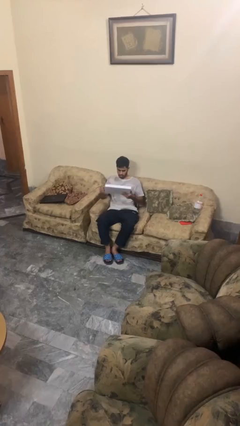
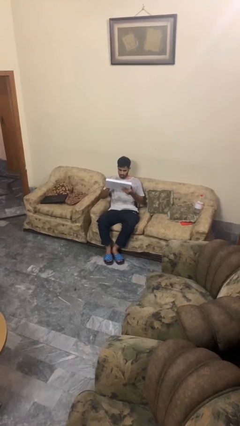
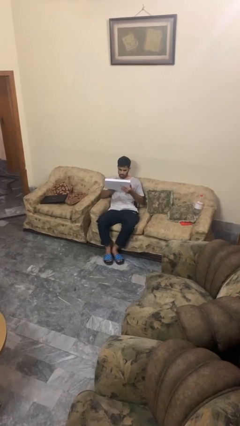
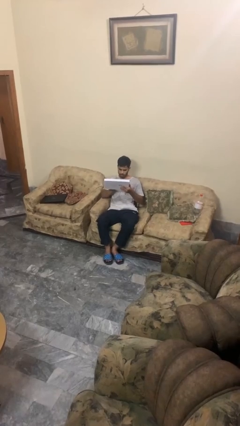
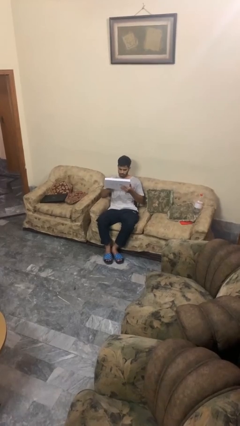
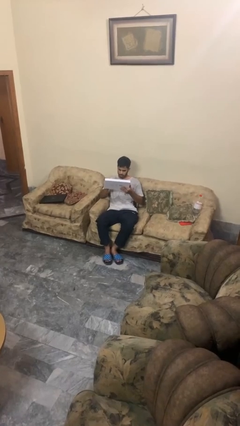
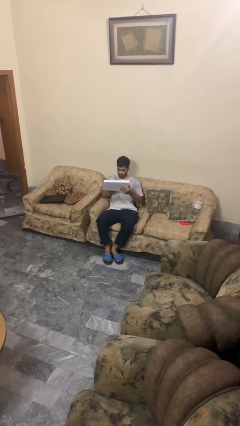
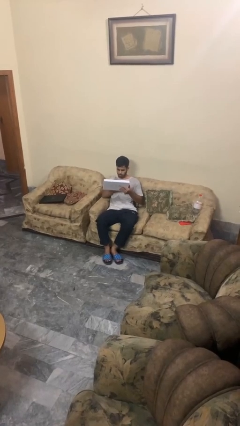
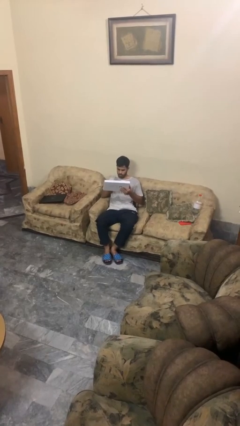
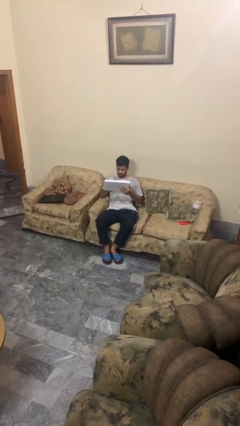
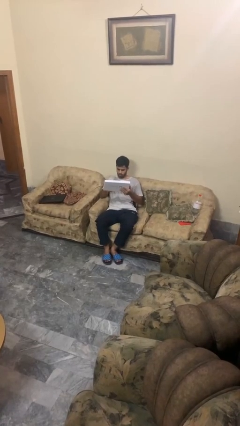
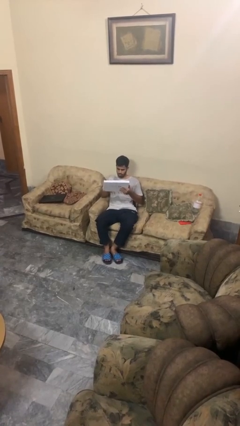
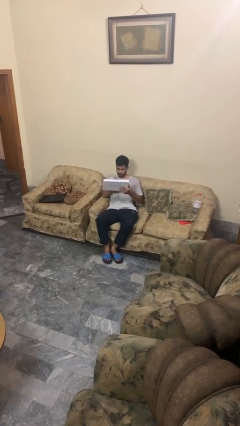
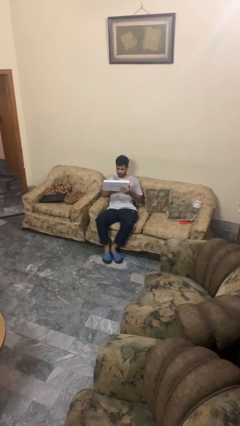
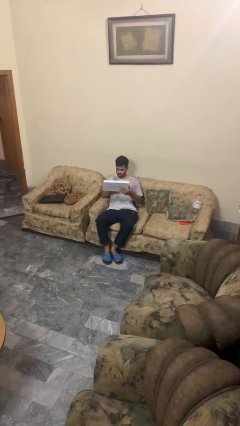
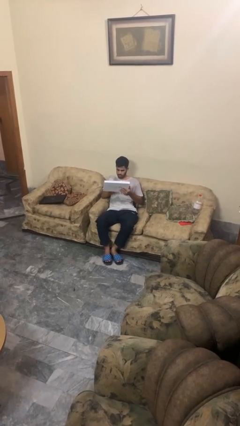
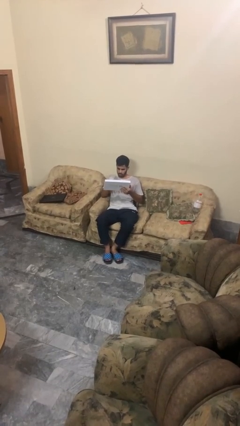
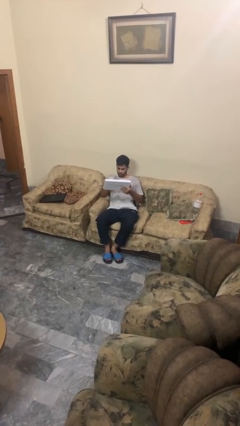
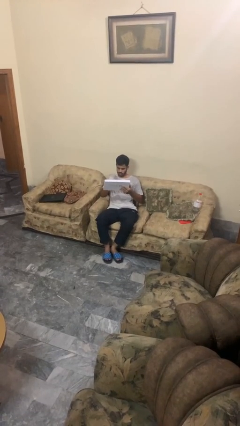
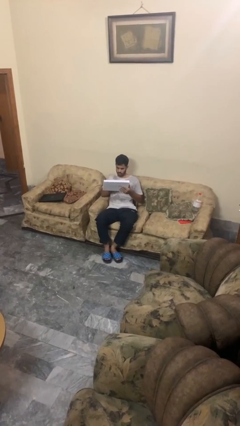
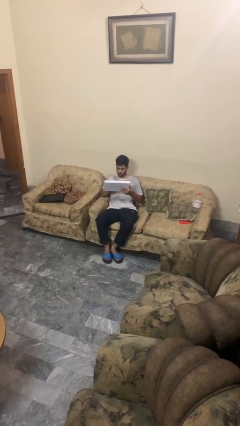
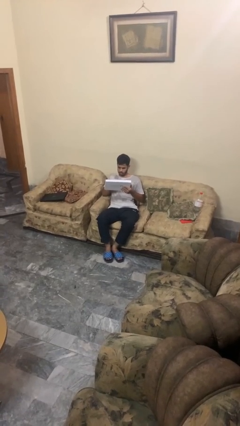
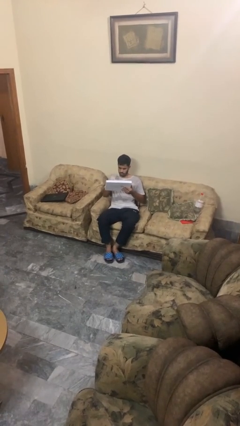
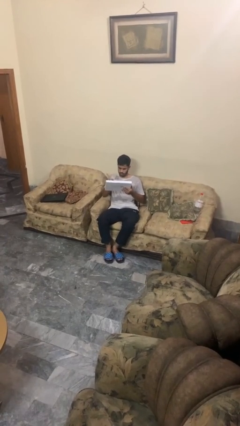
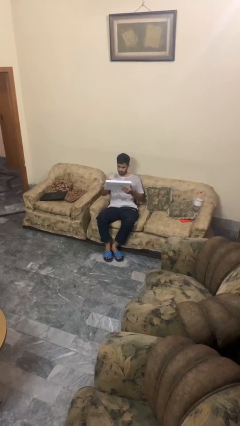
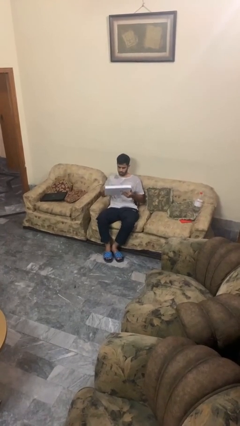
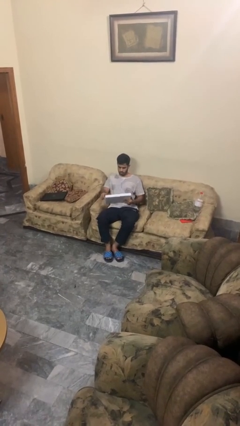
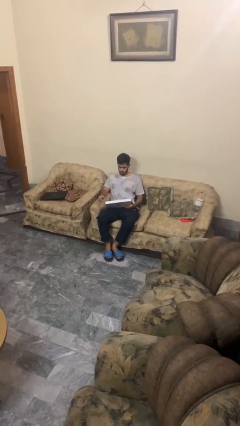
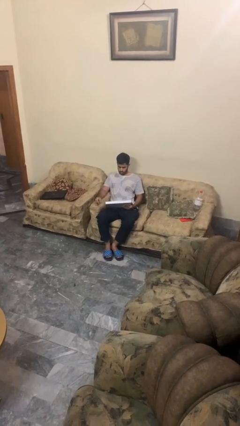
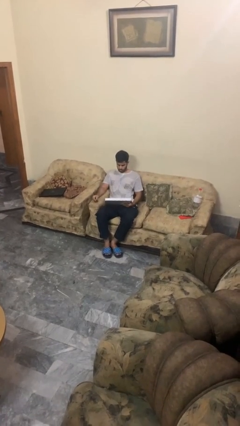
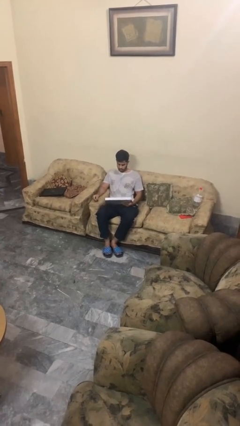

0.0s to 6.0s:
person interacts with tablet

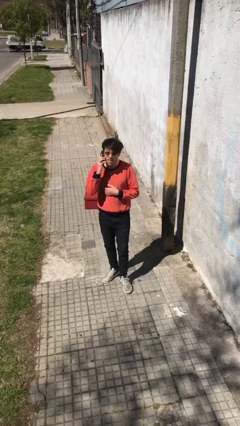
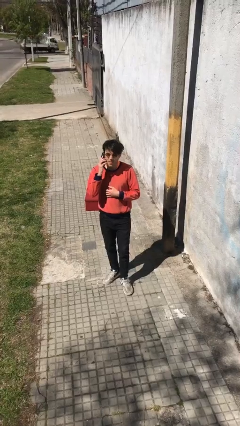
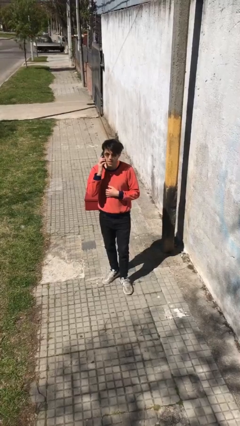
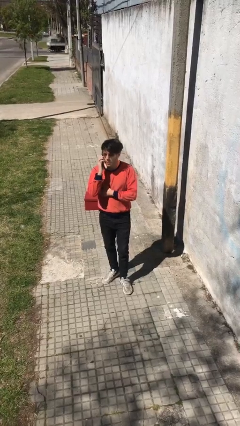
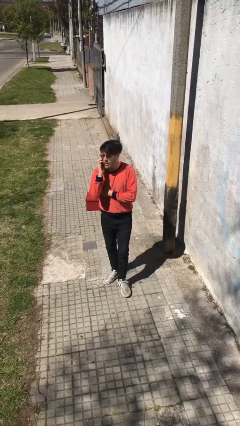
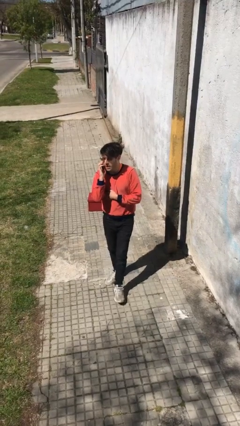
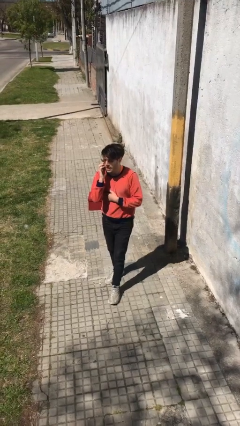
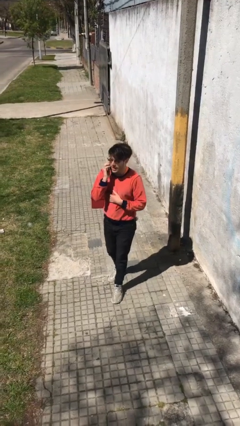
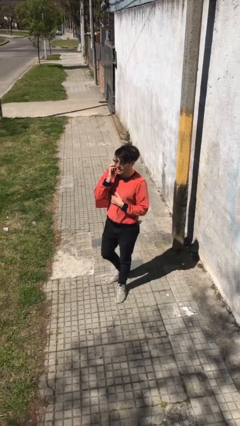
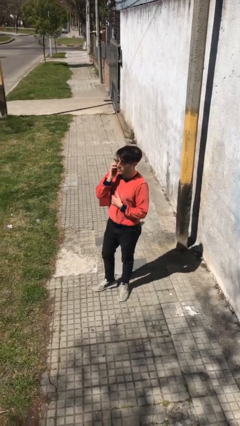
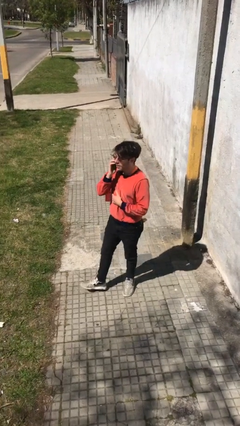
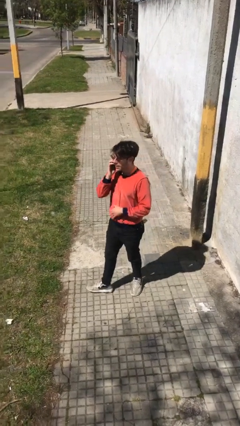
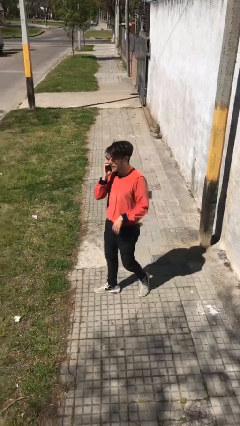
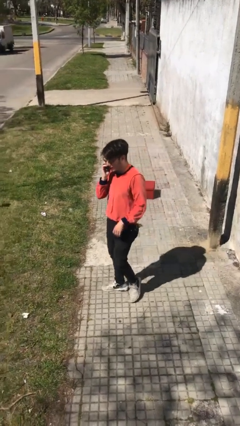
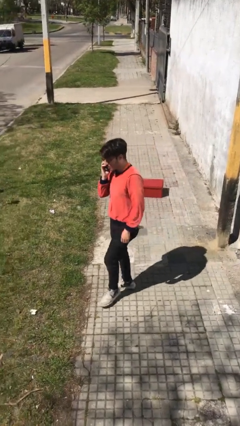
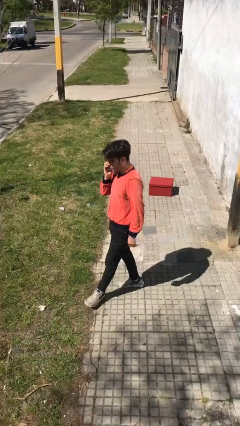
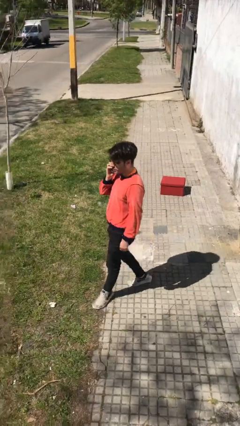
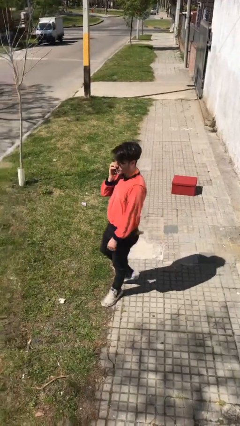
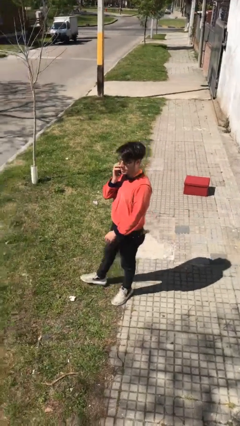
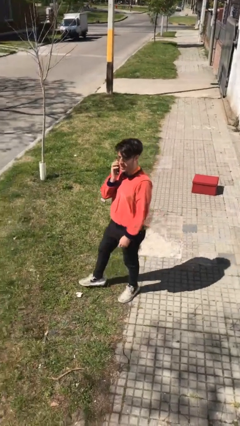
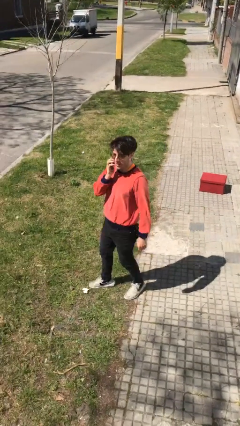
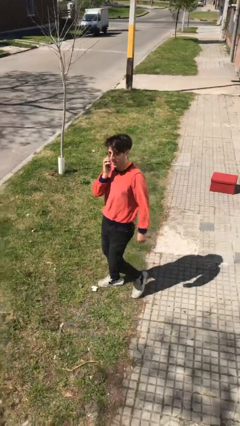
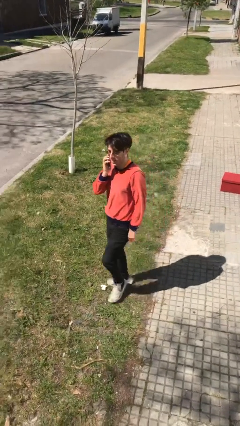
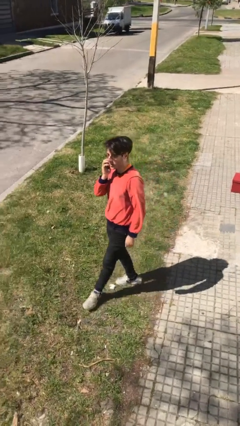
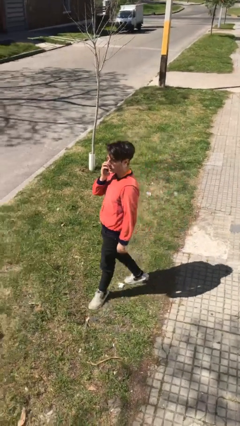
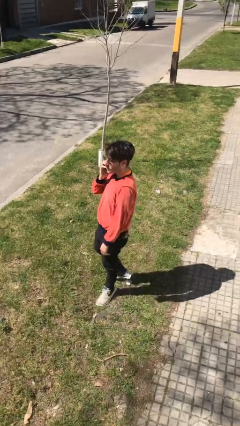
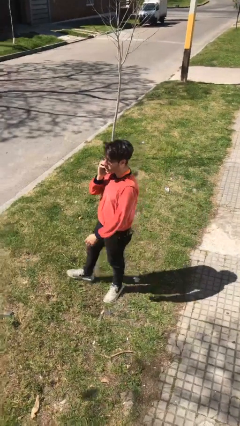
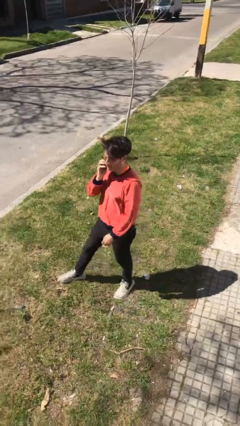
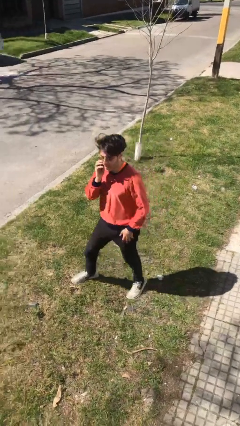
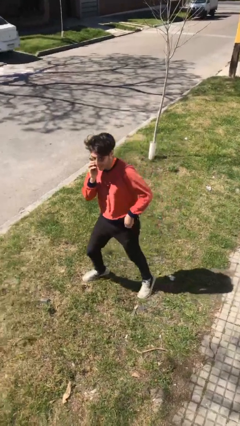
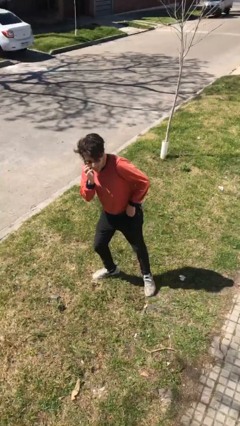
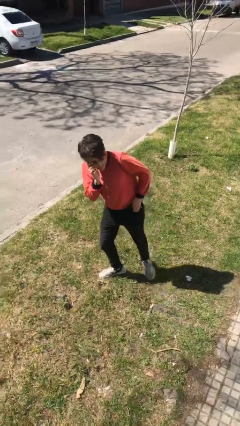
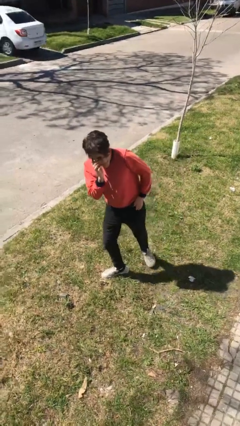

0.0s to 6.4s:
person talks on phone

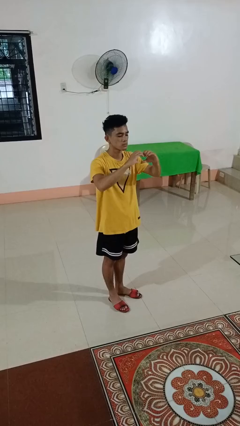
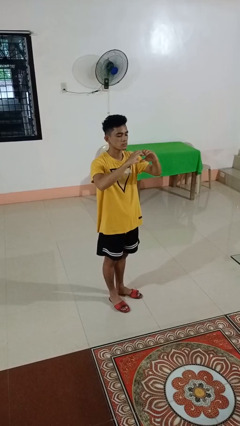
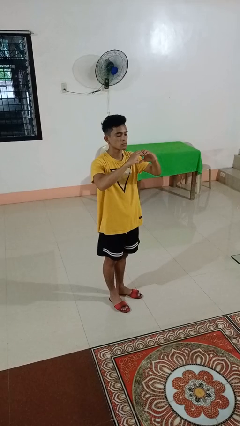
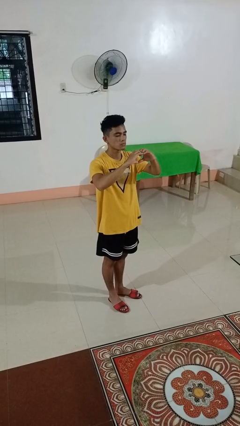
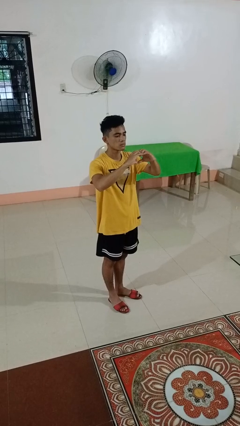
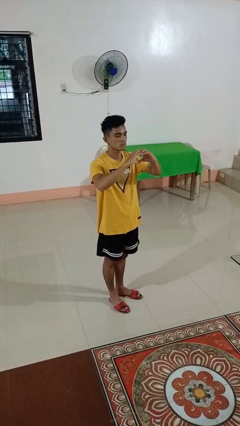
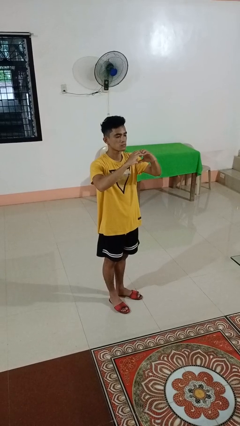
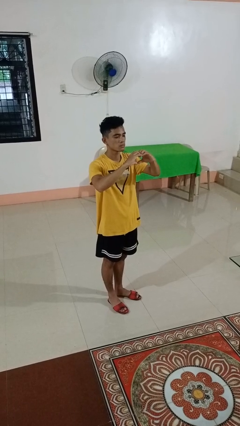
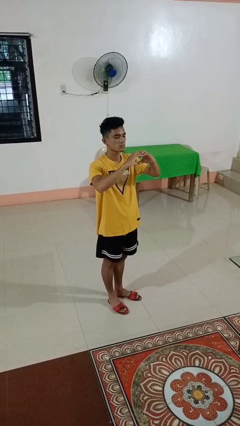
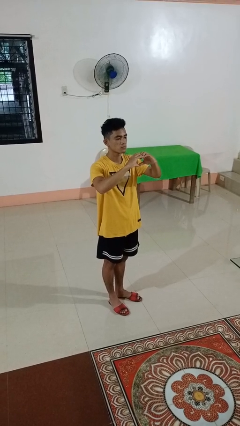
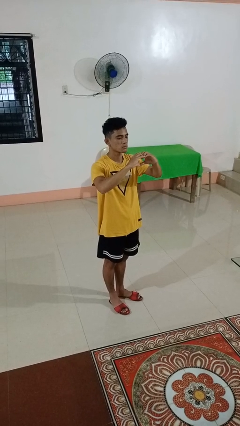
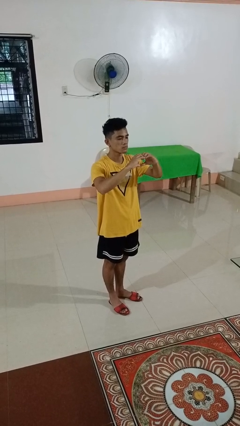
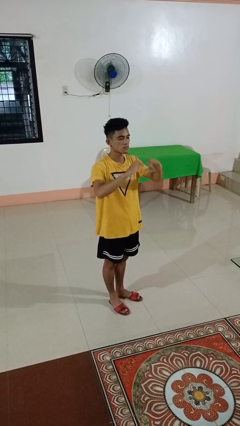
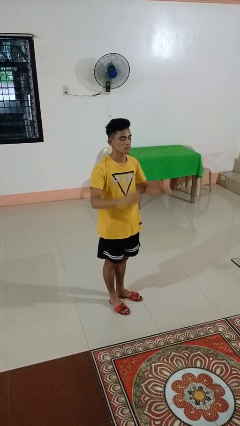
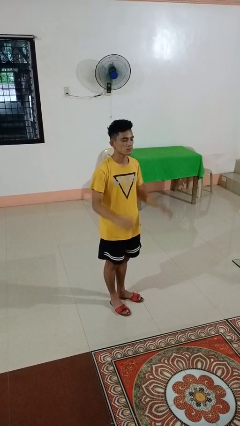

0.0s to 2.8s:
person gestures heart

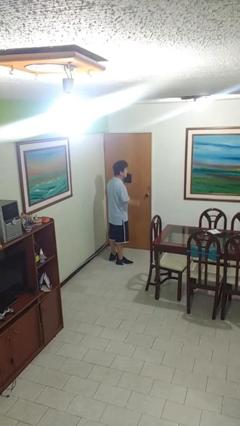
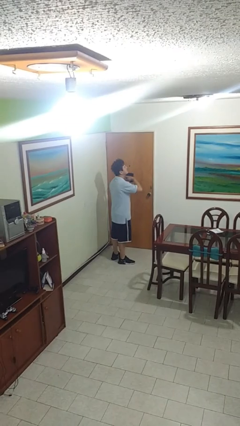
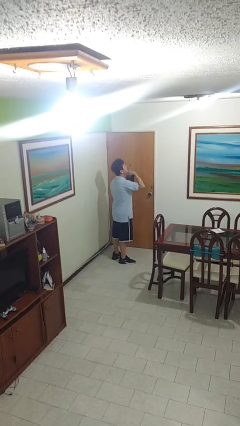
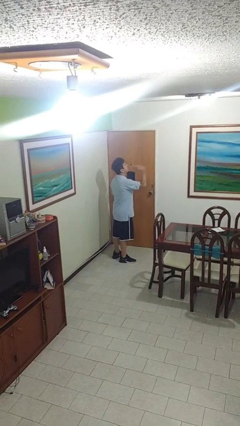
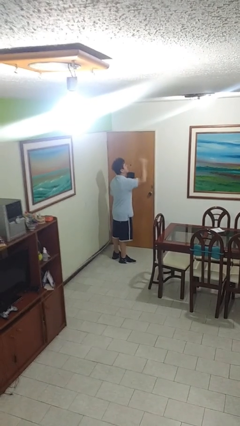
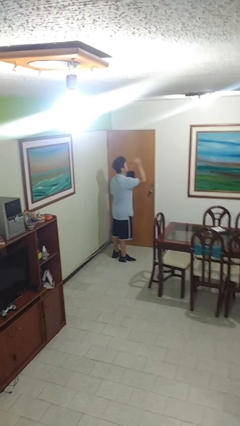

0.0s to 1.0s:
person gestures cut

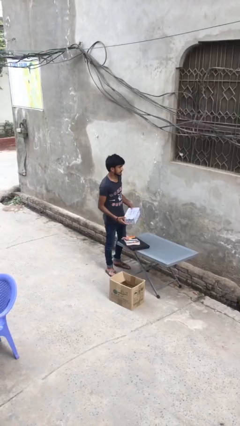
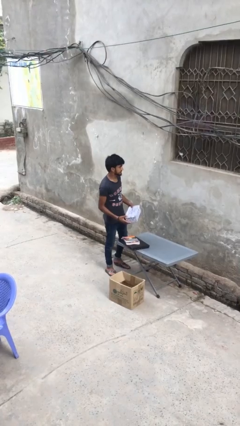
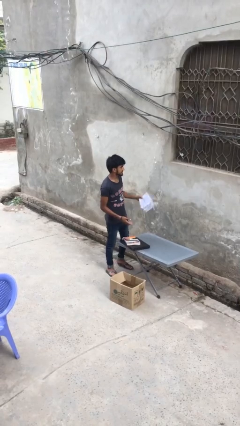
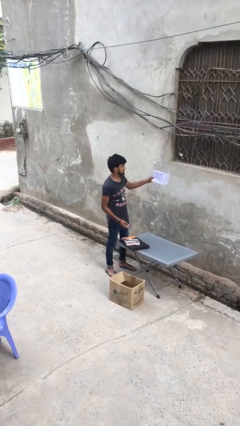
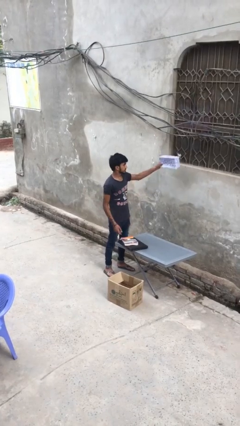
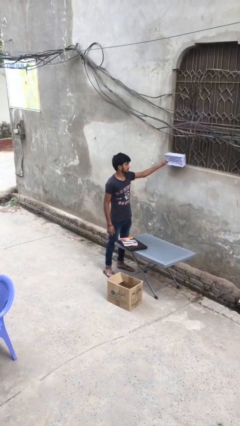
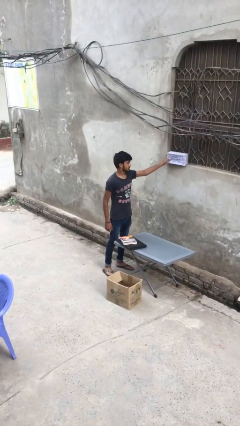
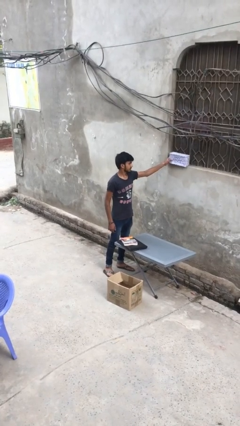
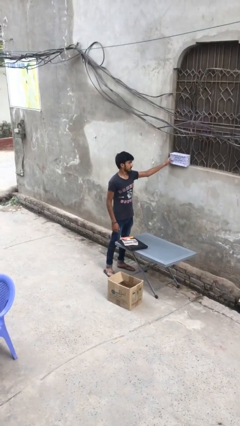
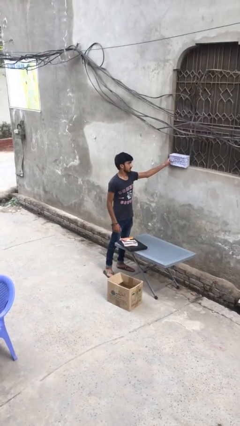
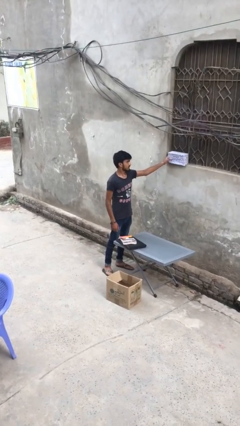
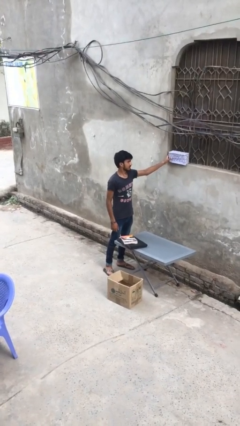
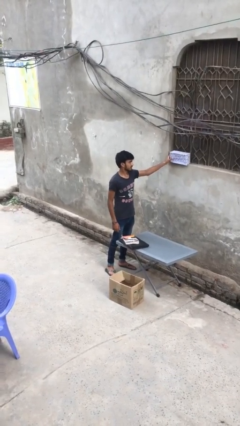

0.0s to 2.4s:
person puts down object on shelf
